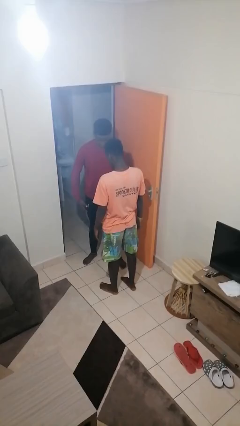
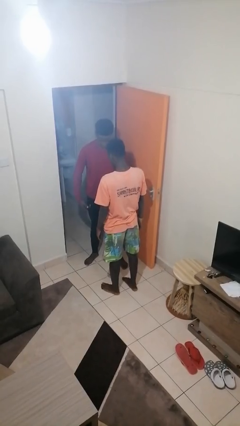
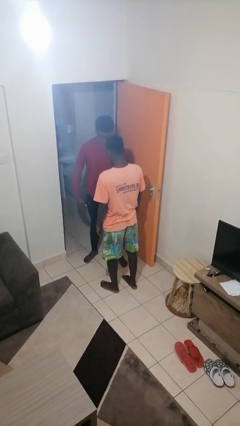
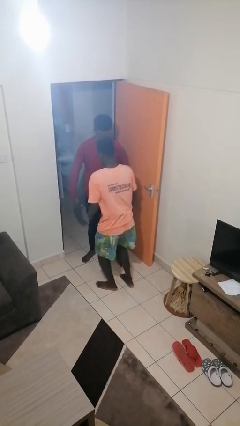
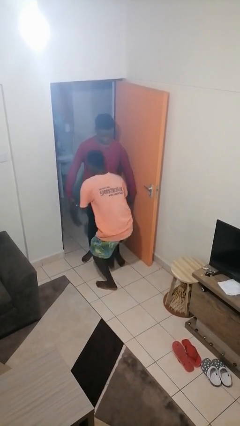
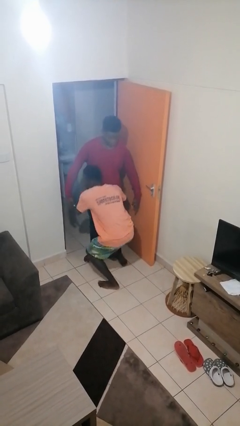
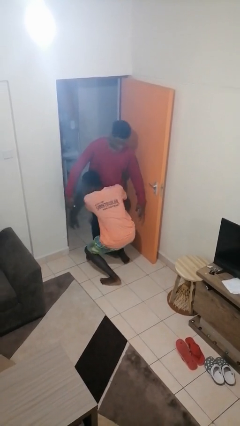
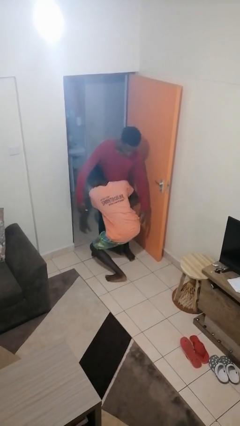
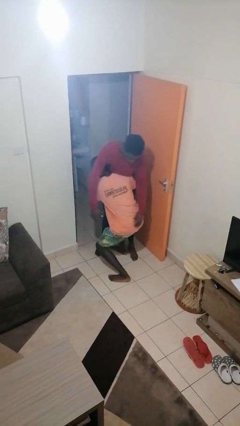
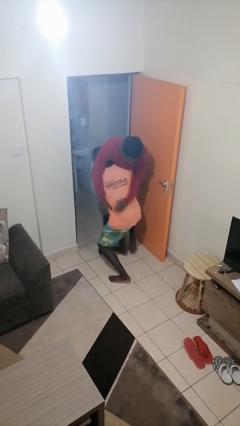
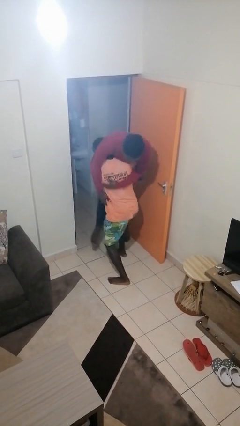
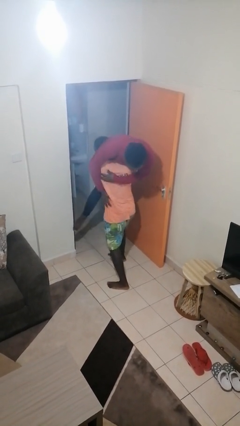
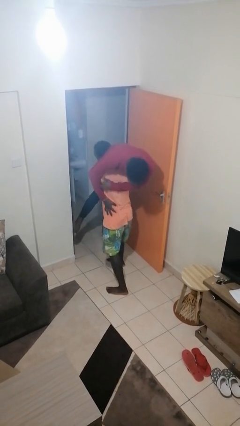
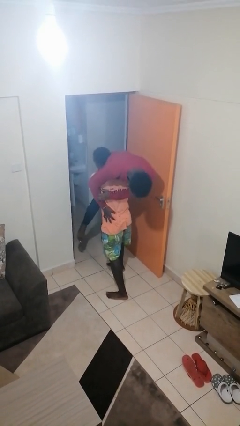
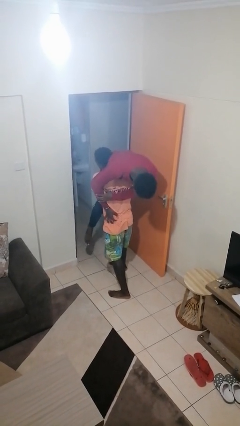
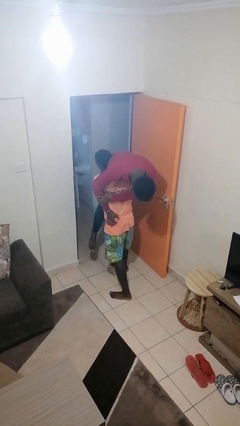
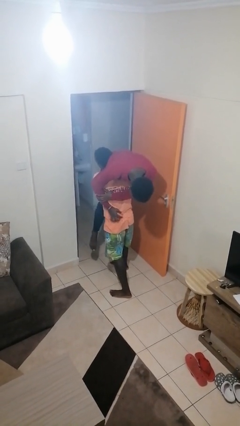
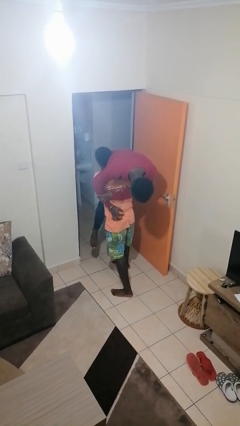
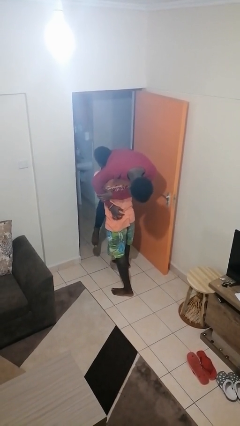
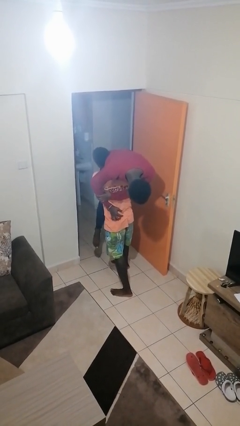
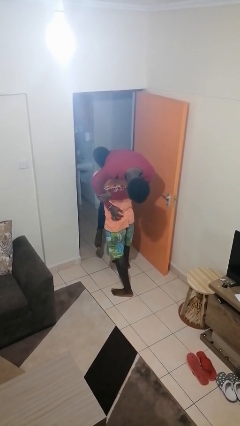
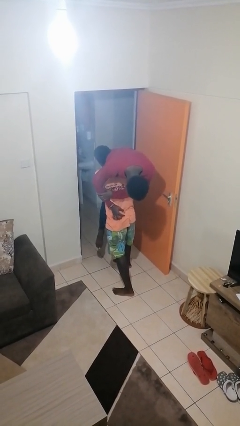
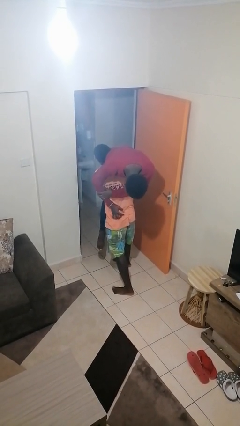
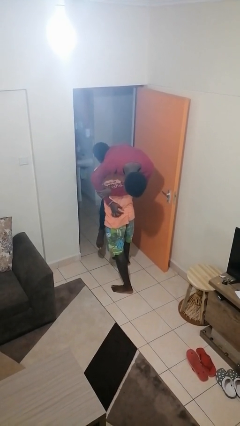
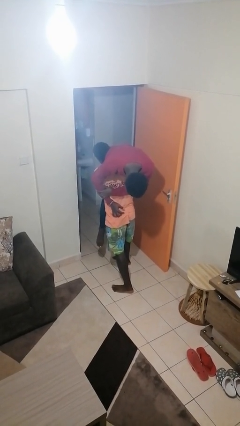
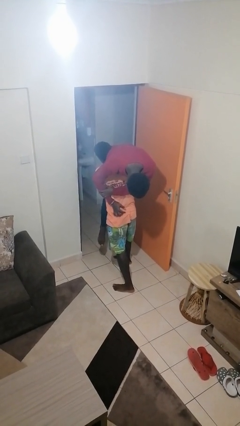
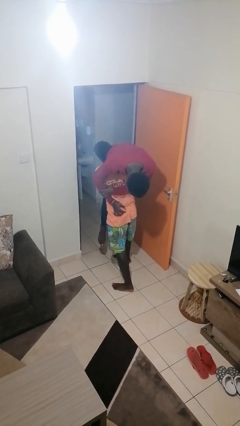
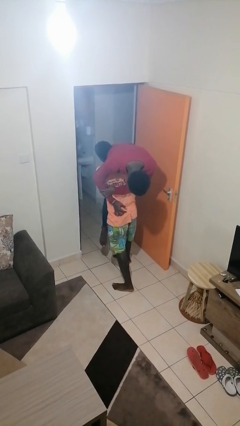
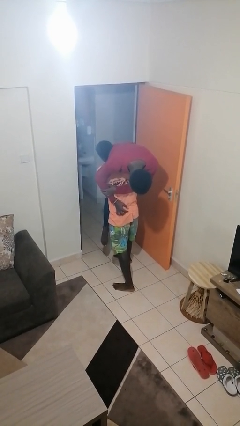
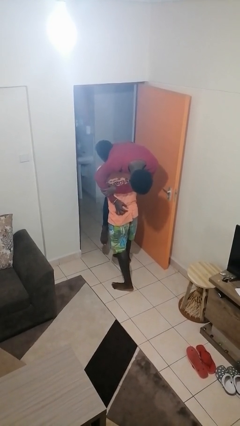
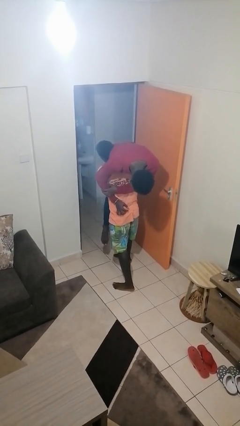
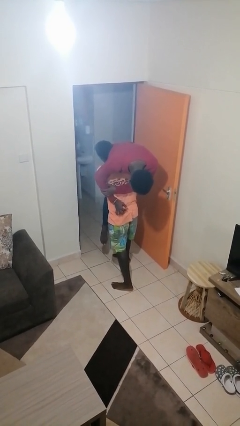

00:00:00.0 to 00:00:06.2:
person carries person over shoulder

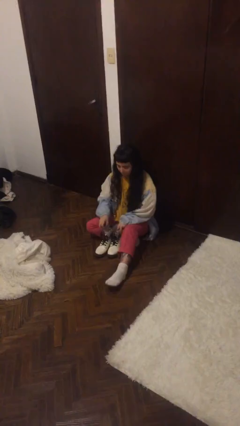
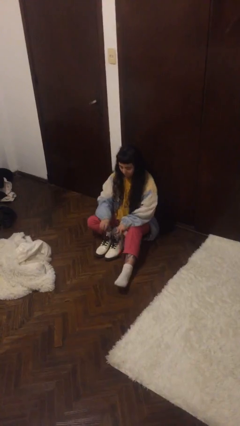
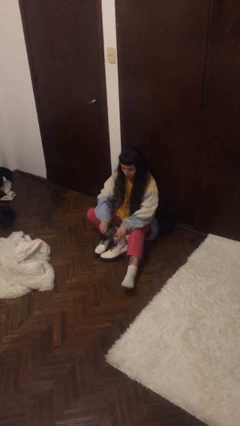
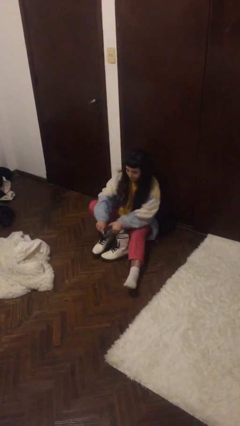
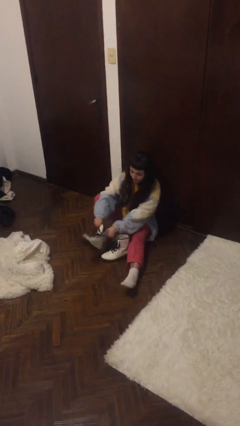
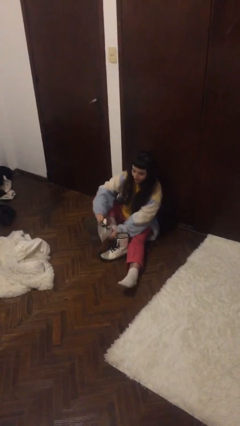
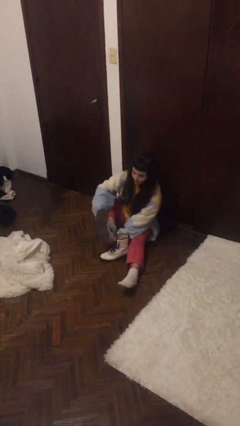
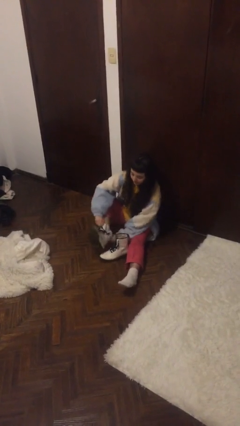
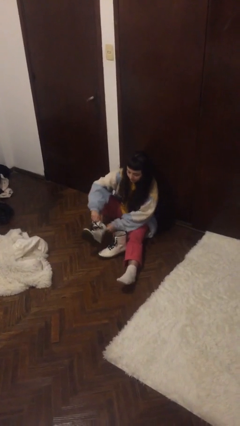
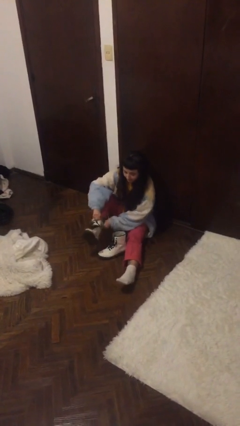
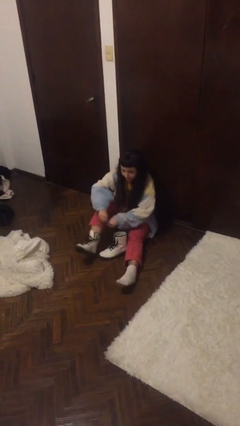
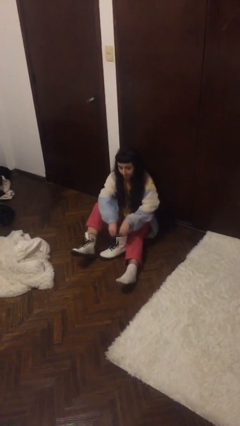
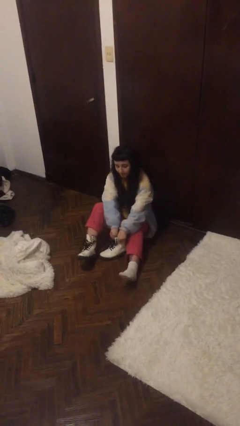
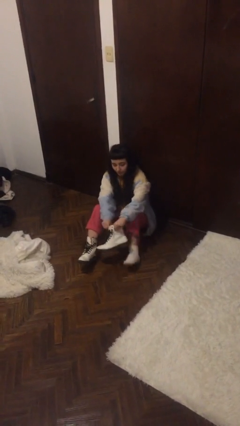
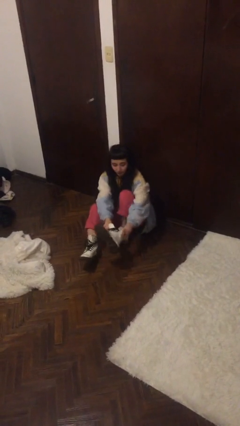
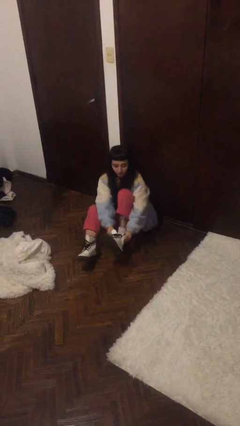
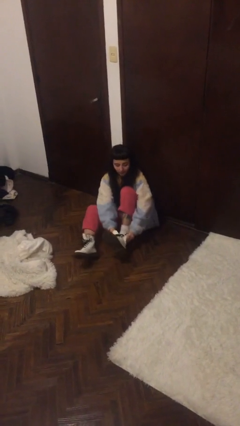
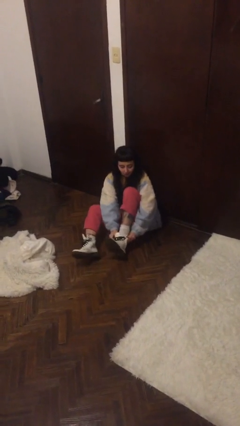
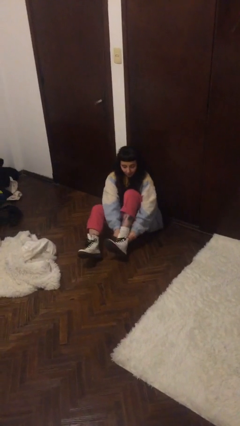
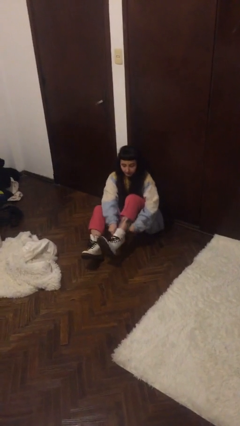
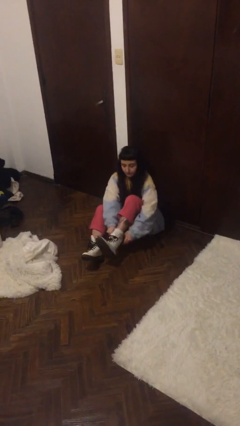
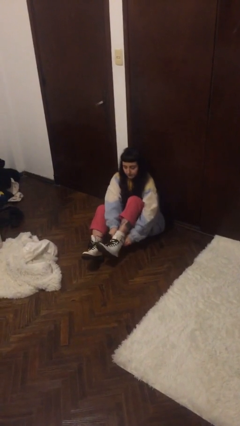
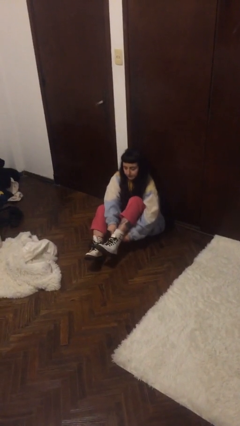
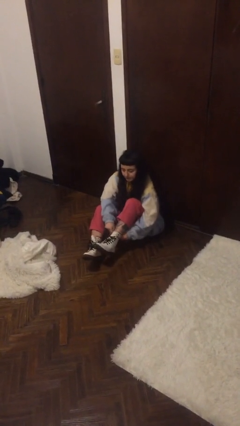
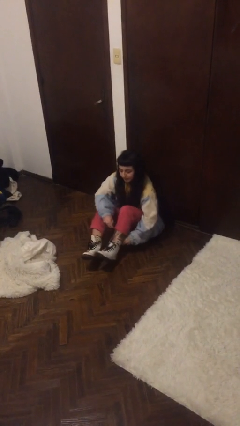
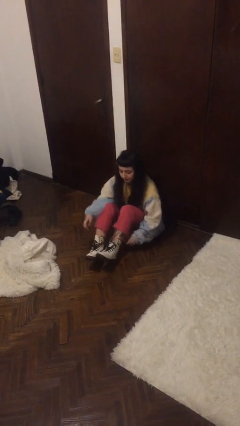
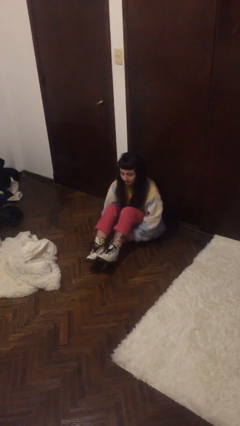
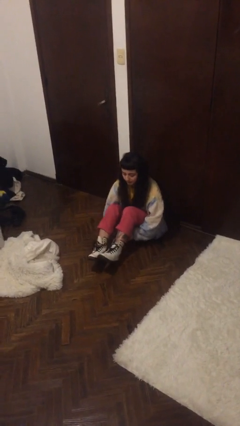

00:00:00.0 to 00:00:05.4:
person puts on boots

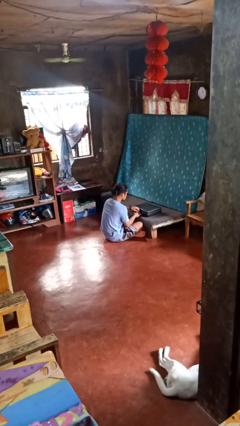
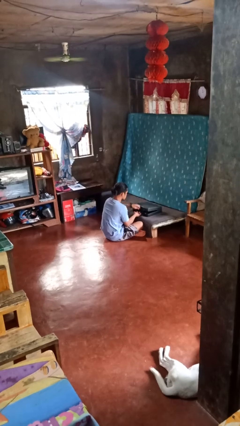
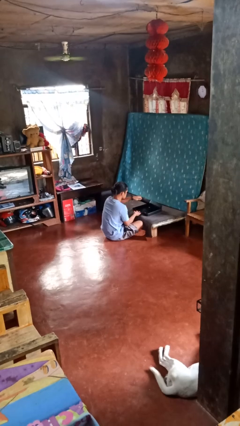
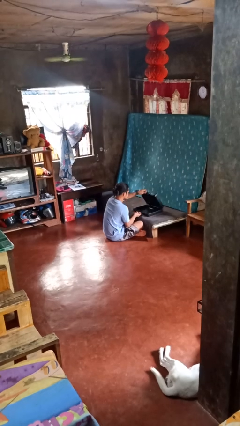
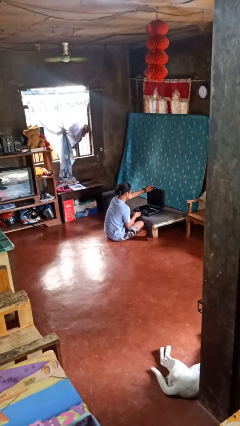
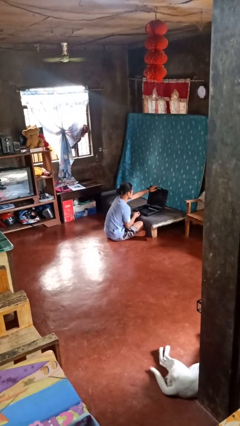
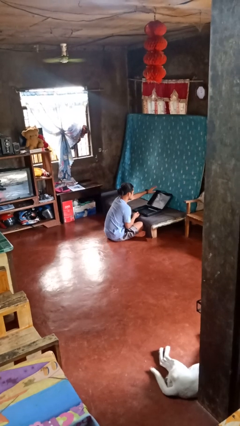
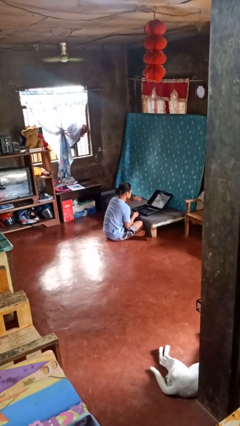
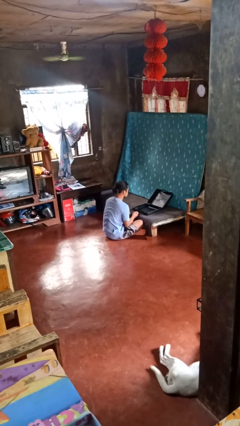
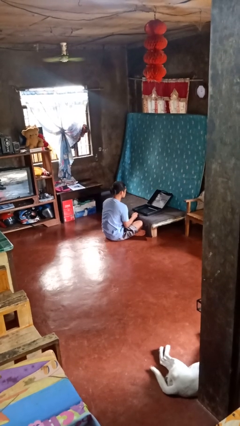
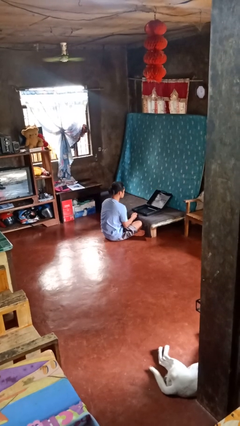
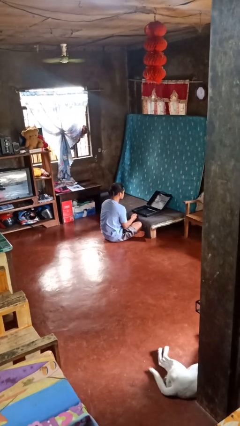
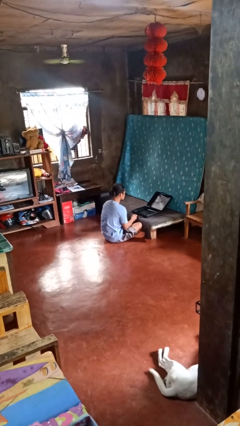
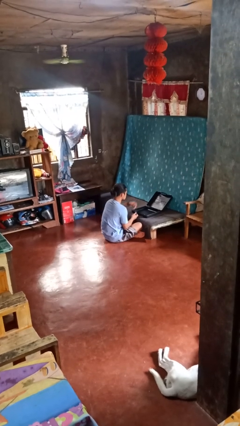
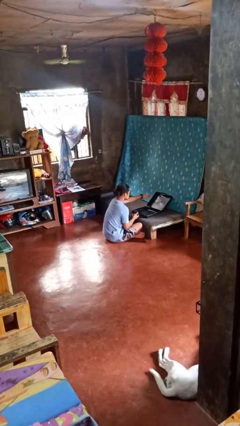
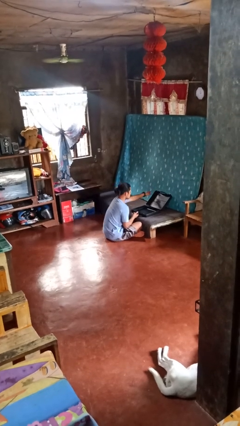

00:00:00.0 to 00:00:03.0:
person opens suitcase

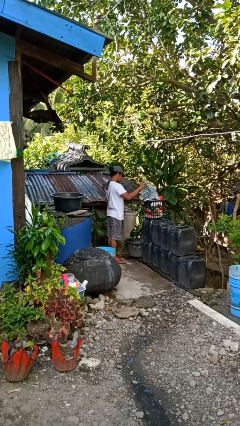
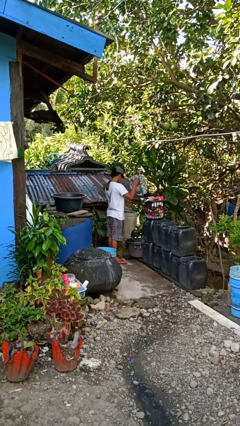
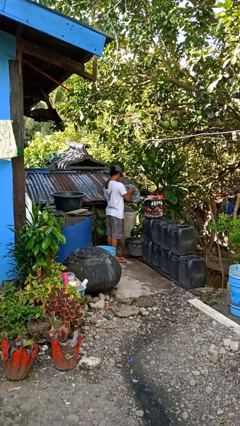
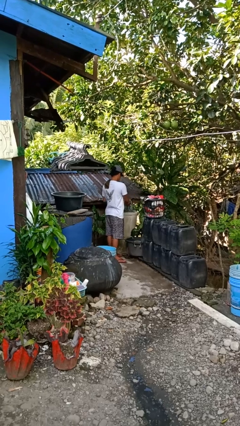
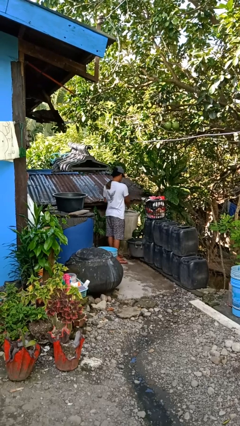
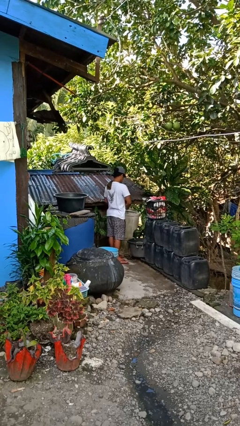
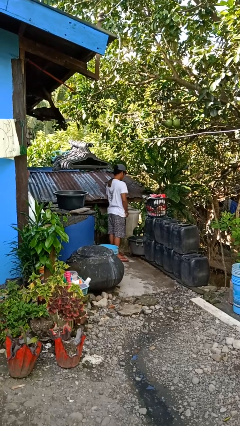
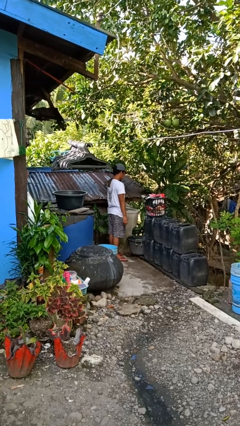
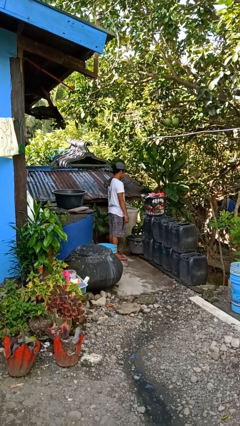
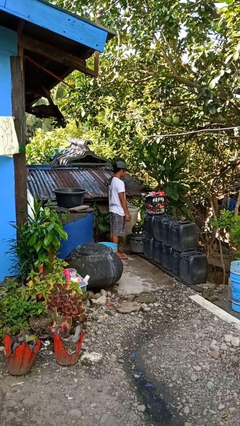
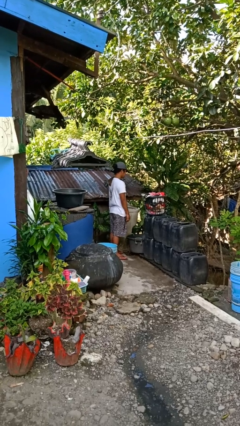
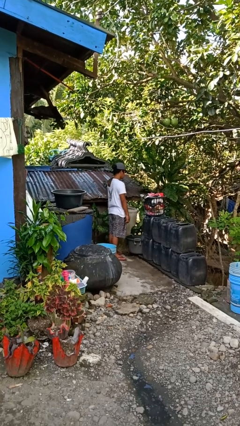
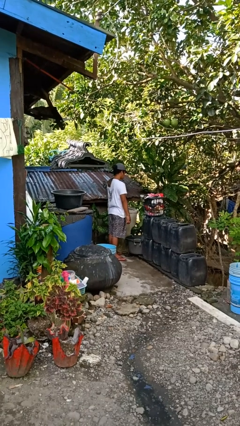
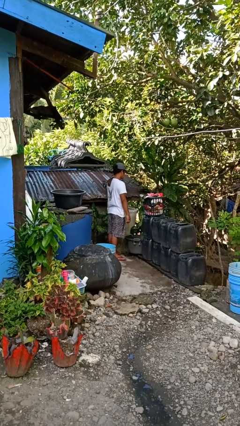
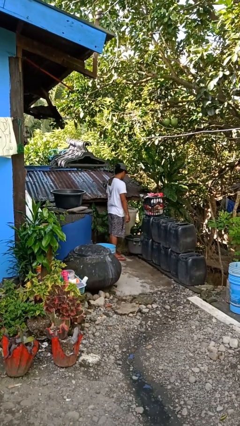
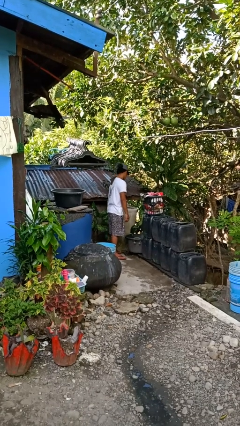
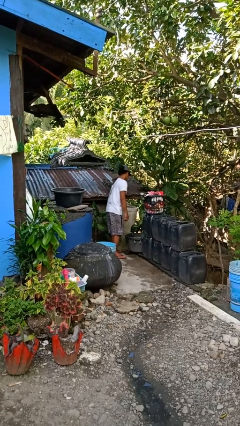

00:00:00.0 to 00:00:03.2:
person loads dryer
